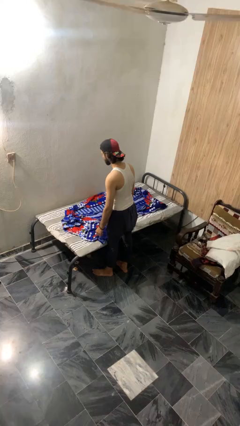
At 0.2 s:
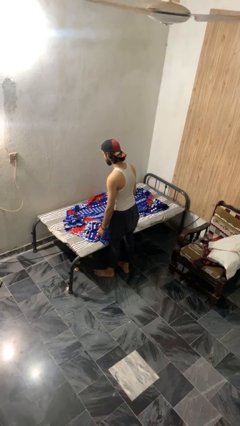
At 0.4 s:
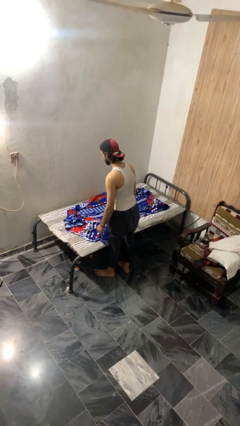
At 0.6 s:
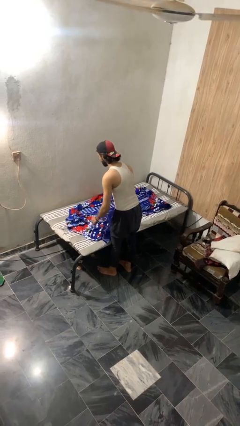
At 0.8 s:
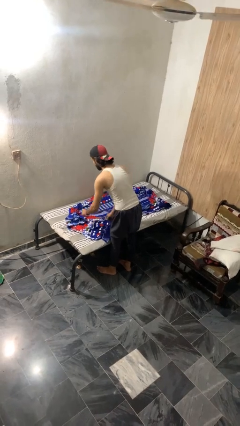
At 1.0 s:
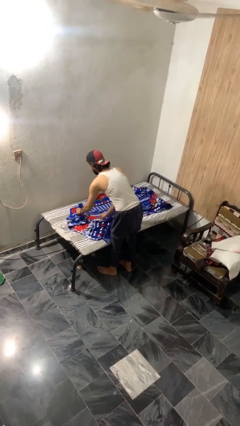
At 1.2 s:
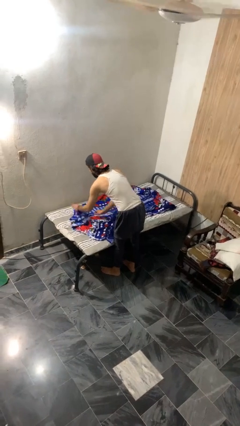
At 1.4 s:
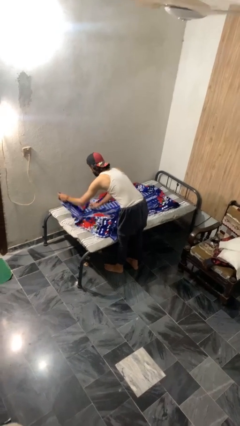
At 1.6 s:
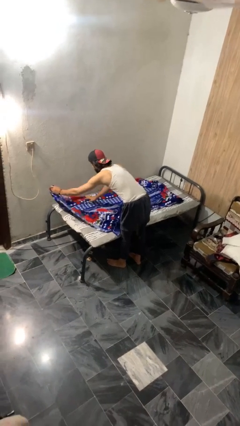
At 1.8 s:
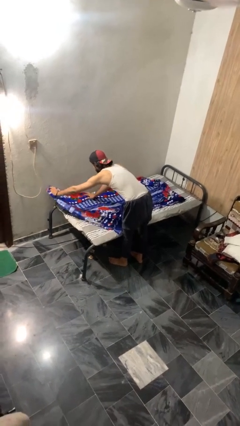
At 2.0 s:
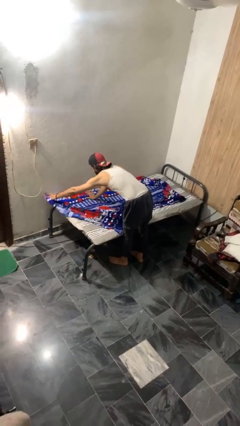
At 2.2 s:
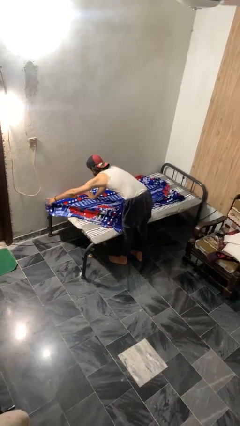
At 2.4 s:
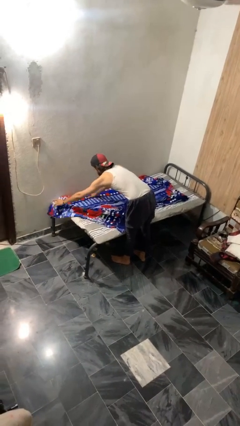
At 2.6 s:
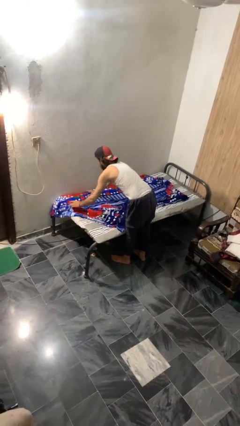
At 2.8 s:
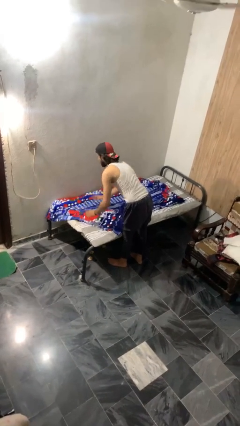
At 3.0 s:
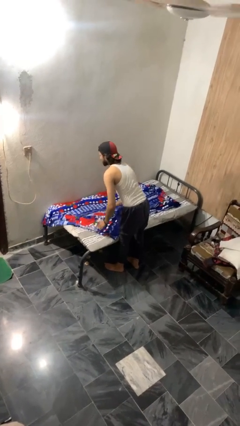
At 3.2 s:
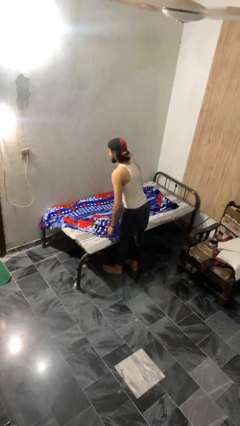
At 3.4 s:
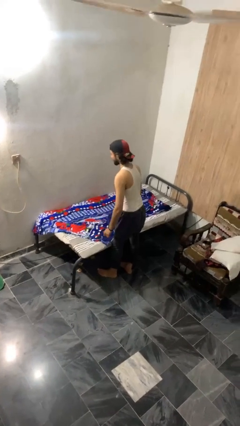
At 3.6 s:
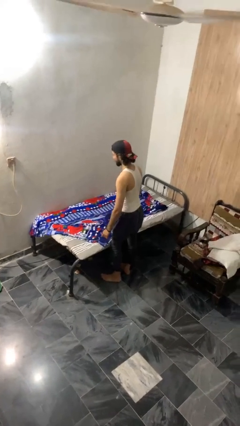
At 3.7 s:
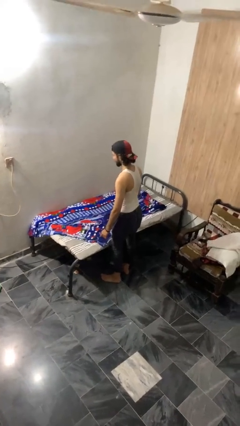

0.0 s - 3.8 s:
person makes bed

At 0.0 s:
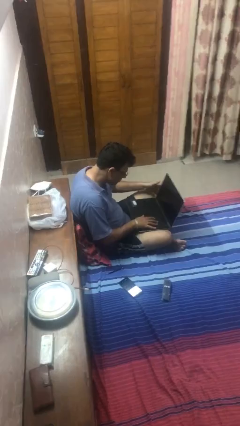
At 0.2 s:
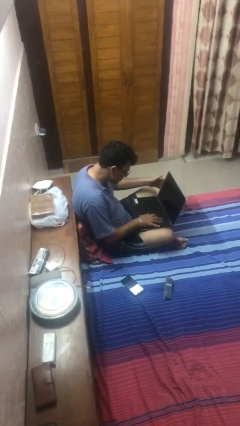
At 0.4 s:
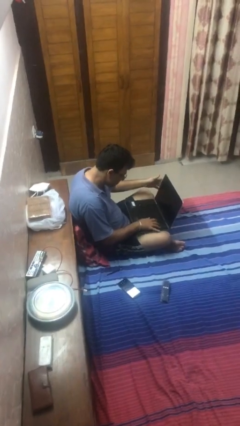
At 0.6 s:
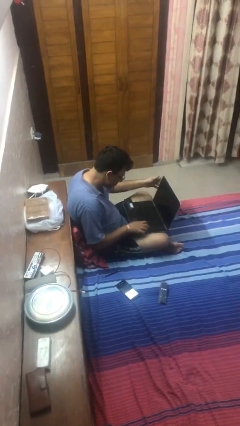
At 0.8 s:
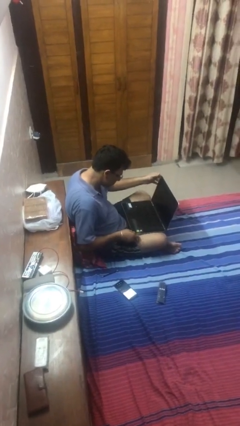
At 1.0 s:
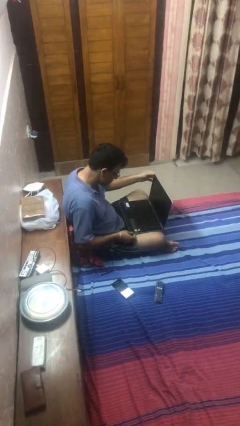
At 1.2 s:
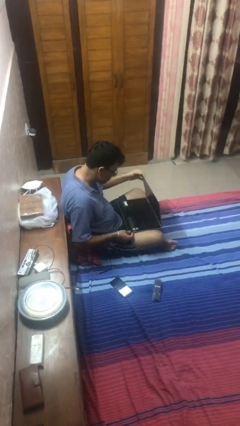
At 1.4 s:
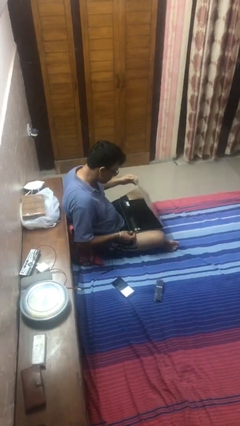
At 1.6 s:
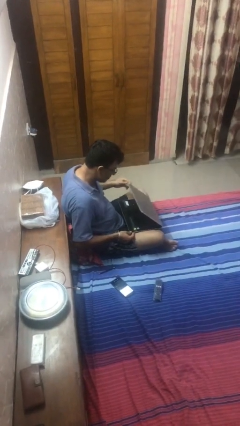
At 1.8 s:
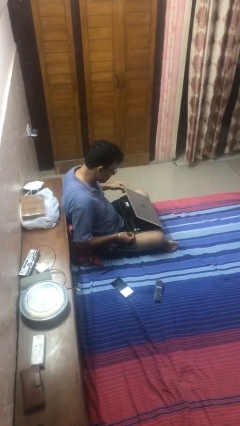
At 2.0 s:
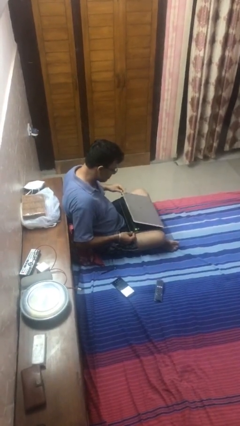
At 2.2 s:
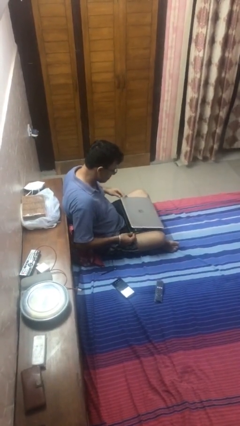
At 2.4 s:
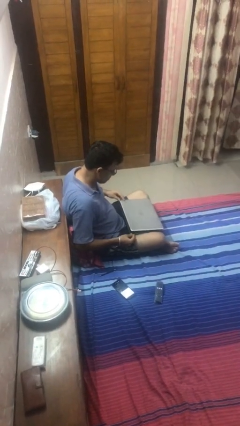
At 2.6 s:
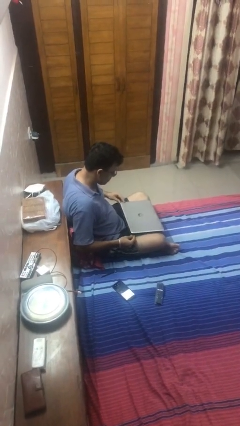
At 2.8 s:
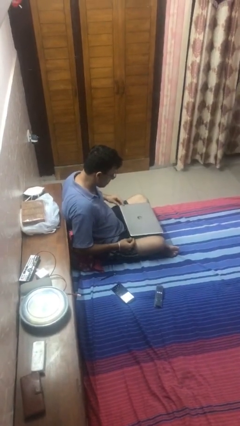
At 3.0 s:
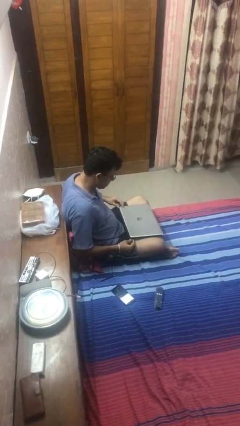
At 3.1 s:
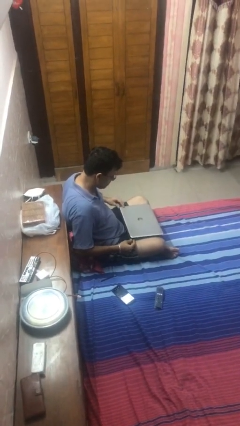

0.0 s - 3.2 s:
person closes laptop

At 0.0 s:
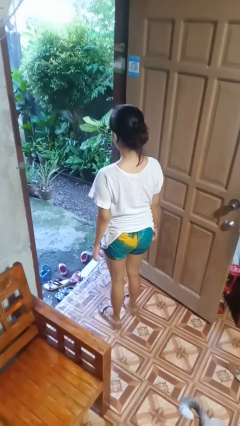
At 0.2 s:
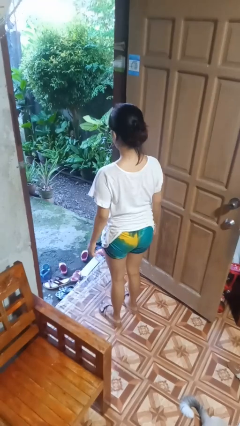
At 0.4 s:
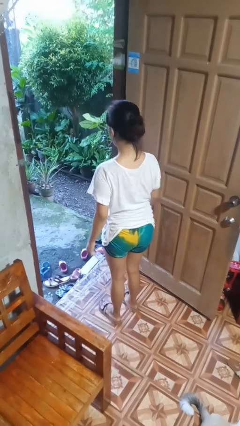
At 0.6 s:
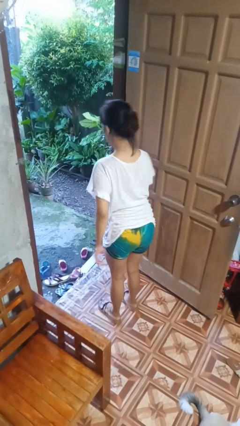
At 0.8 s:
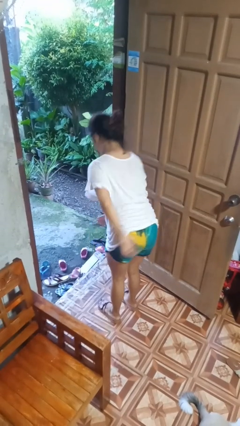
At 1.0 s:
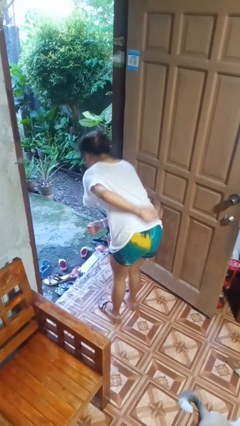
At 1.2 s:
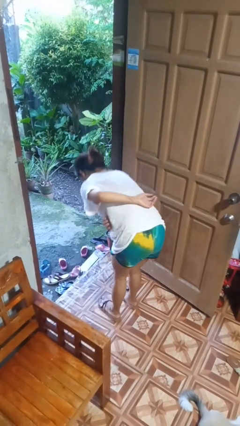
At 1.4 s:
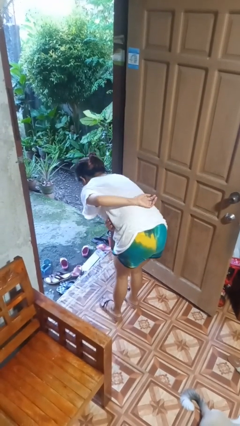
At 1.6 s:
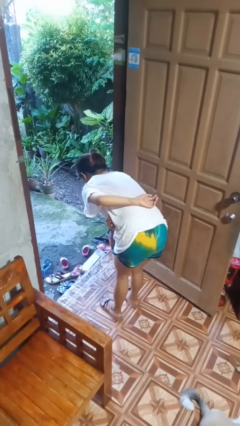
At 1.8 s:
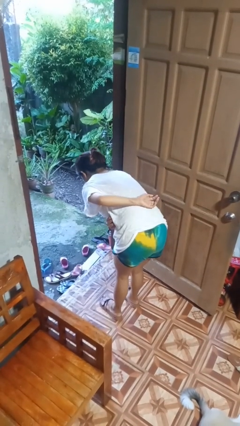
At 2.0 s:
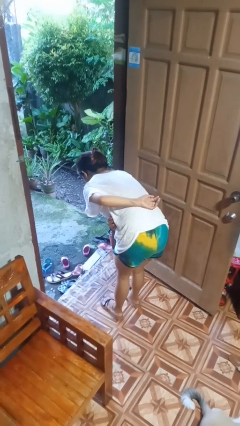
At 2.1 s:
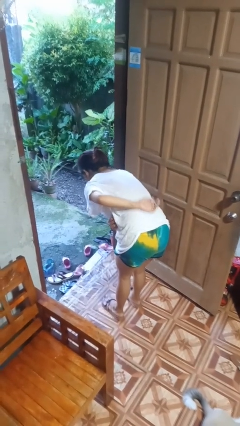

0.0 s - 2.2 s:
person bows

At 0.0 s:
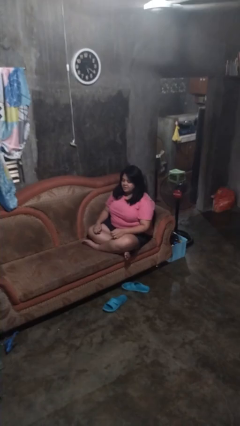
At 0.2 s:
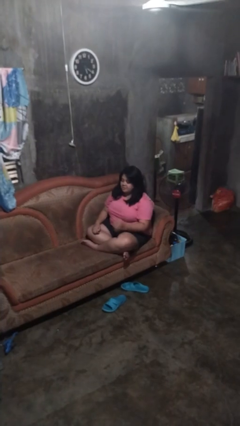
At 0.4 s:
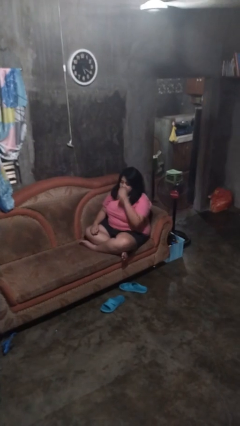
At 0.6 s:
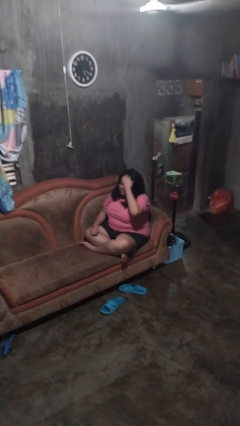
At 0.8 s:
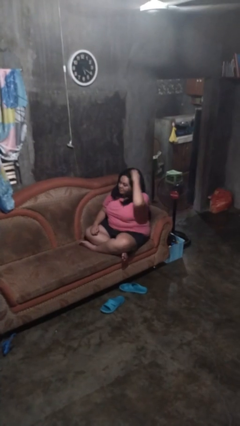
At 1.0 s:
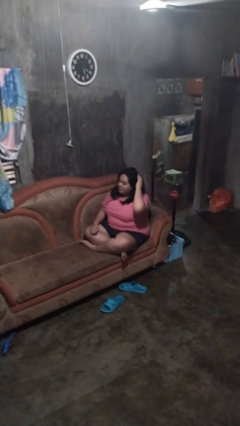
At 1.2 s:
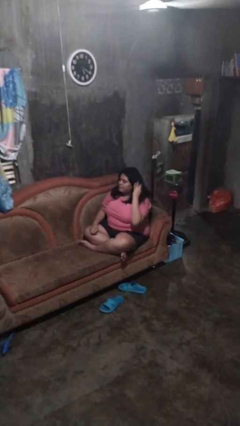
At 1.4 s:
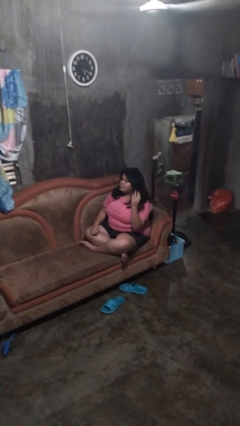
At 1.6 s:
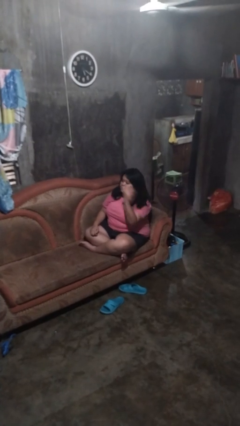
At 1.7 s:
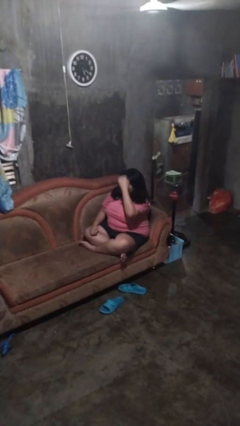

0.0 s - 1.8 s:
person strokes hair

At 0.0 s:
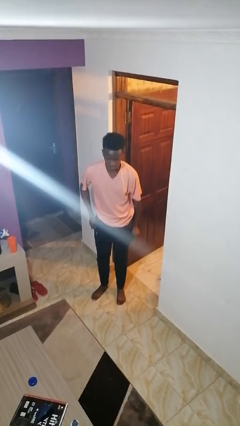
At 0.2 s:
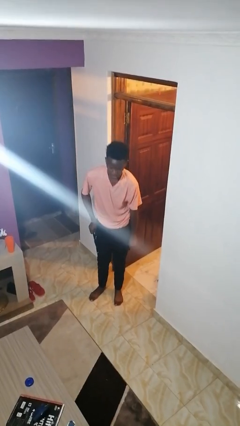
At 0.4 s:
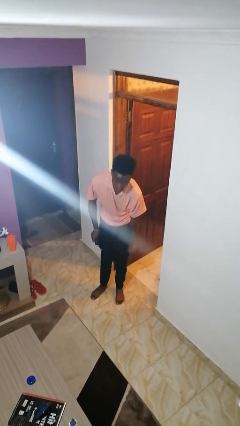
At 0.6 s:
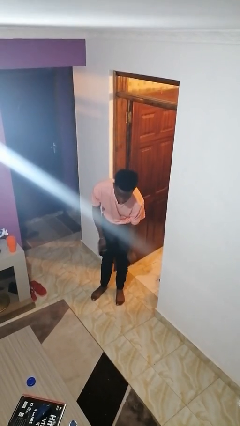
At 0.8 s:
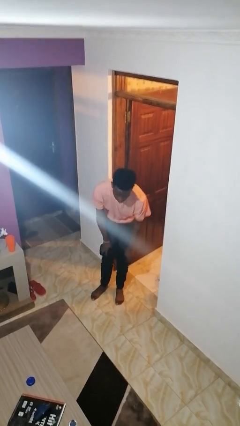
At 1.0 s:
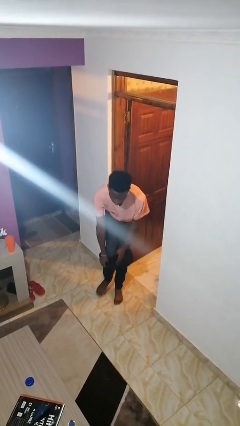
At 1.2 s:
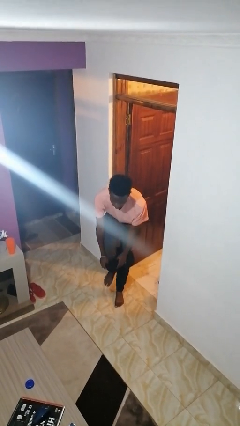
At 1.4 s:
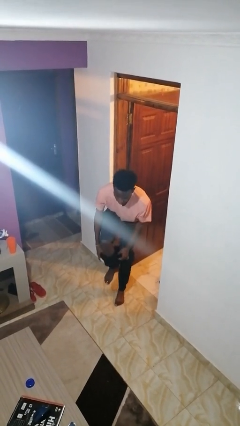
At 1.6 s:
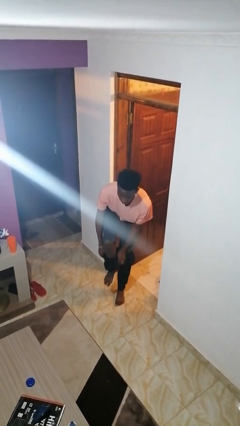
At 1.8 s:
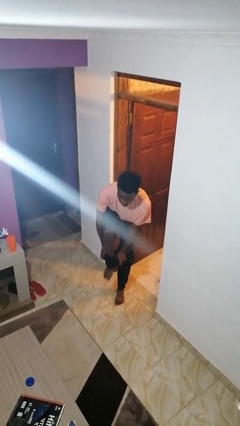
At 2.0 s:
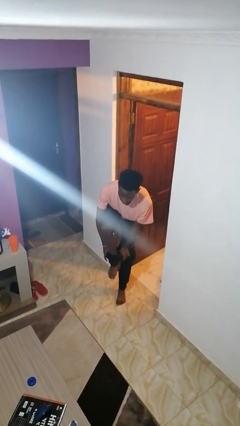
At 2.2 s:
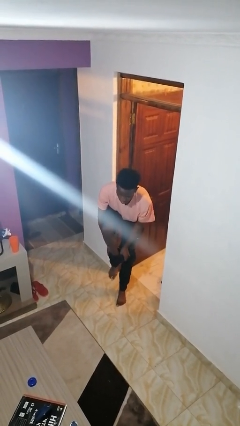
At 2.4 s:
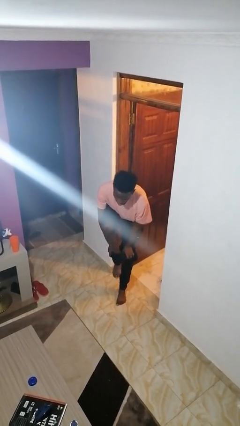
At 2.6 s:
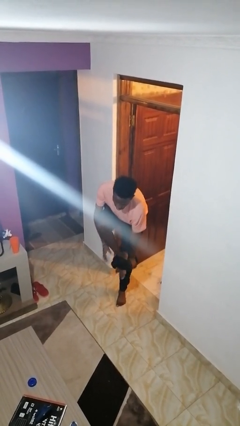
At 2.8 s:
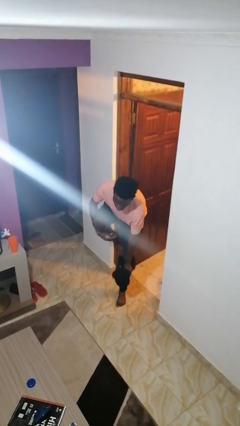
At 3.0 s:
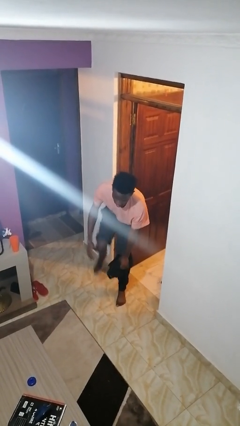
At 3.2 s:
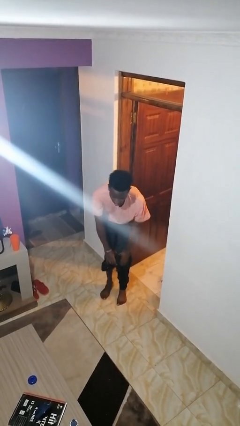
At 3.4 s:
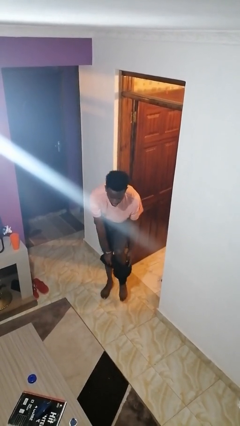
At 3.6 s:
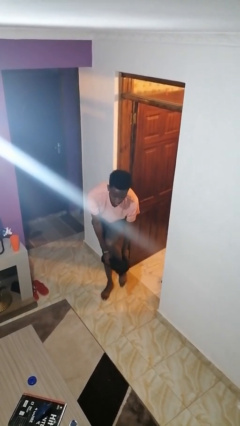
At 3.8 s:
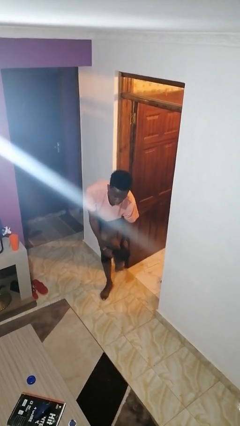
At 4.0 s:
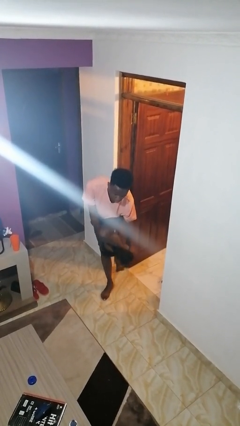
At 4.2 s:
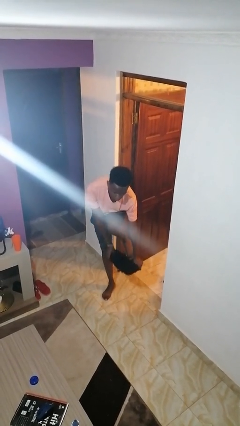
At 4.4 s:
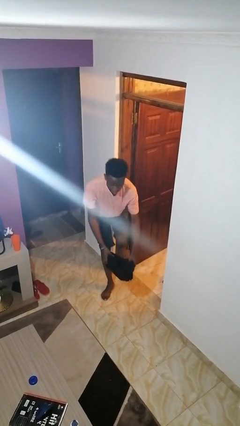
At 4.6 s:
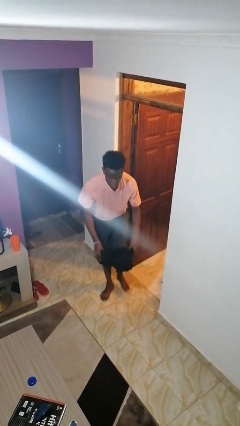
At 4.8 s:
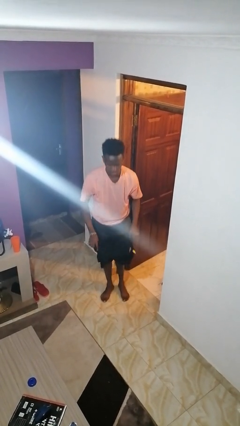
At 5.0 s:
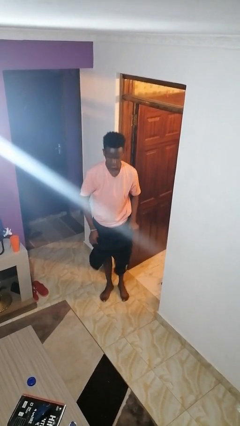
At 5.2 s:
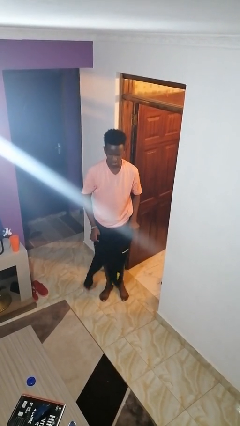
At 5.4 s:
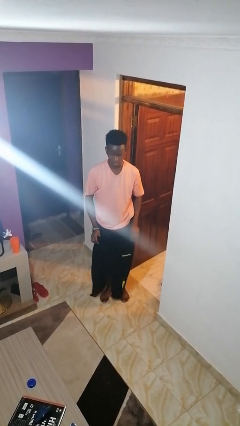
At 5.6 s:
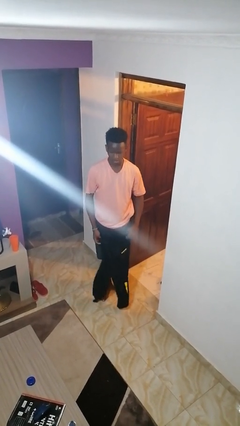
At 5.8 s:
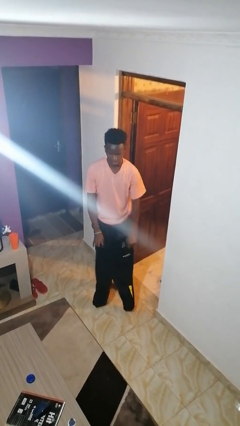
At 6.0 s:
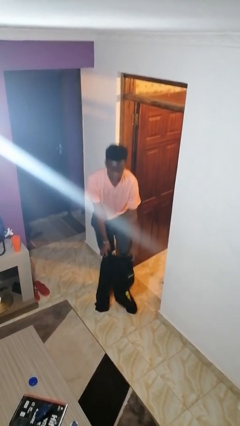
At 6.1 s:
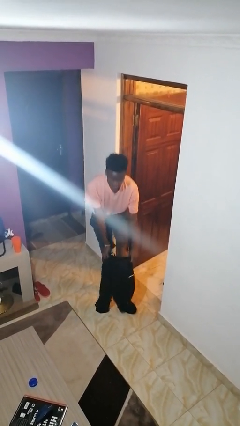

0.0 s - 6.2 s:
person takes off pants

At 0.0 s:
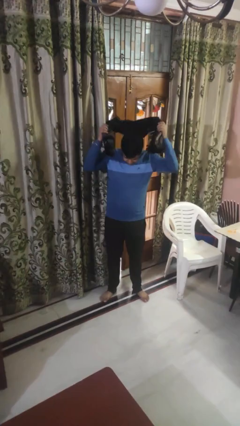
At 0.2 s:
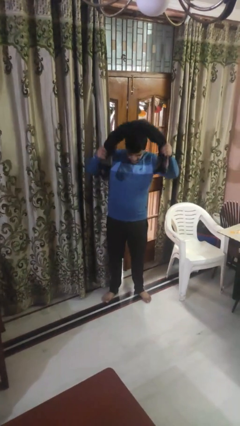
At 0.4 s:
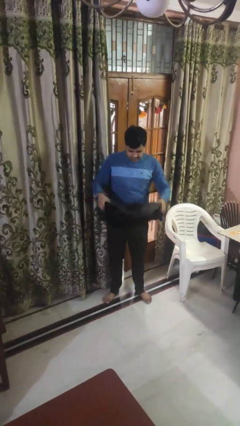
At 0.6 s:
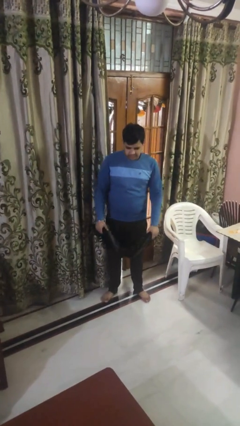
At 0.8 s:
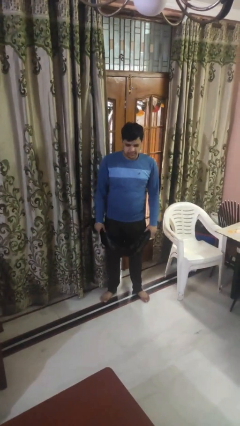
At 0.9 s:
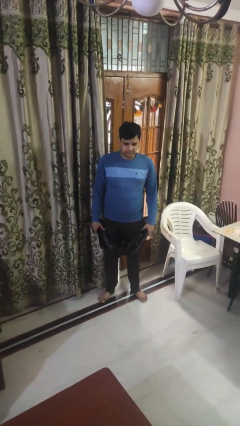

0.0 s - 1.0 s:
person takes off scarf
